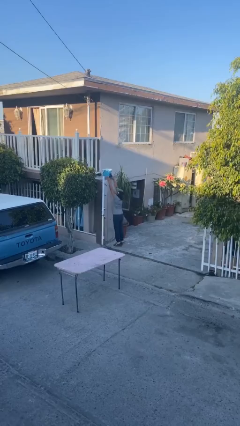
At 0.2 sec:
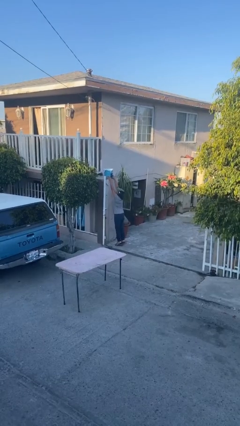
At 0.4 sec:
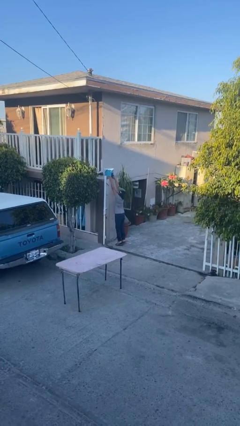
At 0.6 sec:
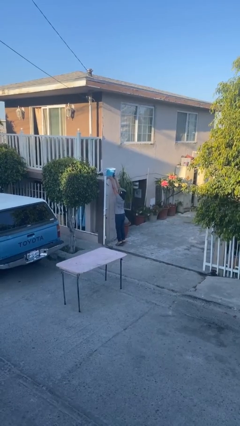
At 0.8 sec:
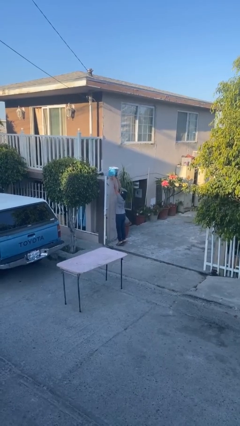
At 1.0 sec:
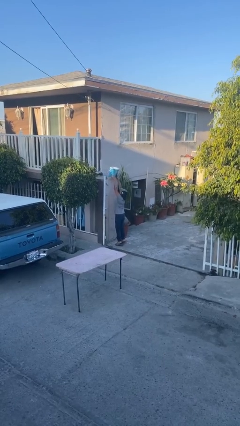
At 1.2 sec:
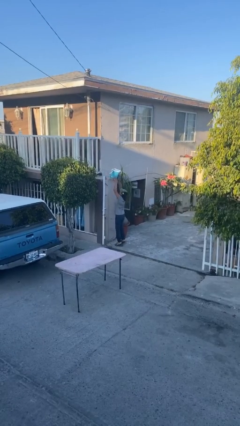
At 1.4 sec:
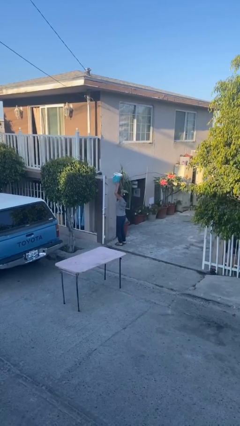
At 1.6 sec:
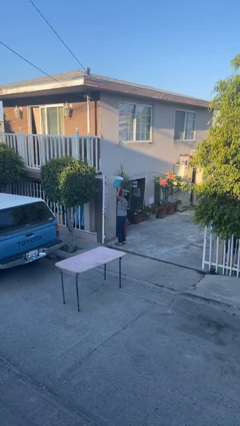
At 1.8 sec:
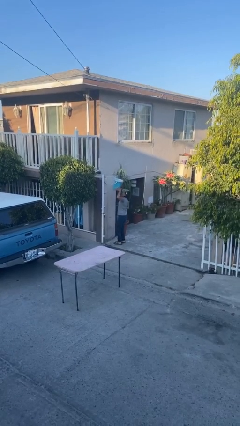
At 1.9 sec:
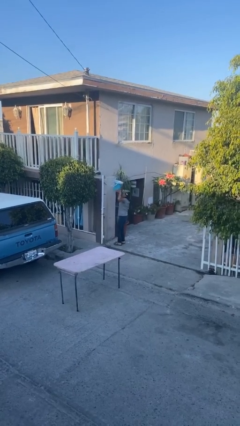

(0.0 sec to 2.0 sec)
person picks up object from shelf

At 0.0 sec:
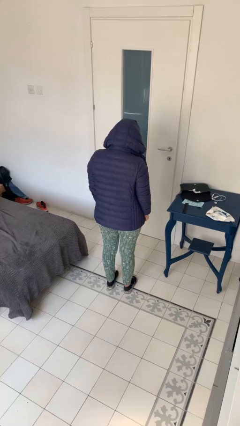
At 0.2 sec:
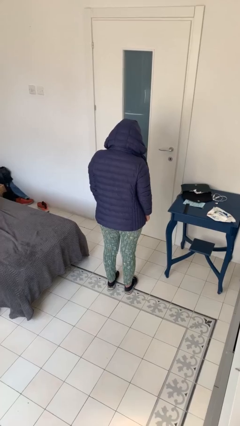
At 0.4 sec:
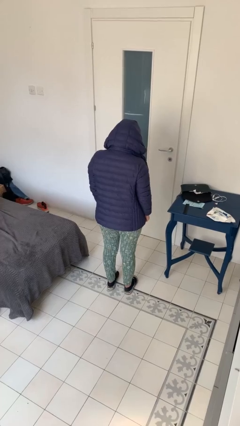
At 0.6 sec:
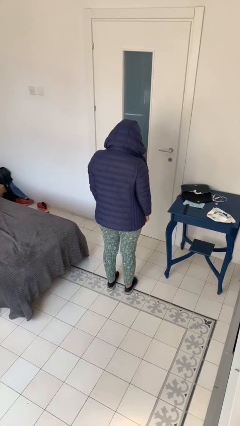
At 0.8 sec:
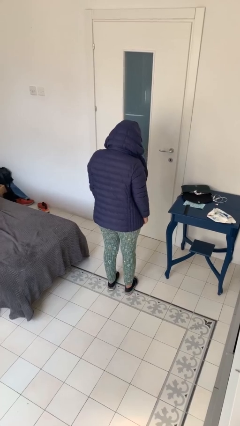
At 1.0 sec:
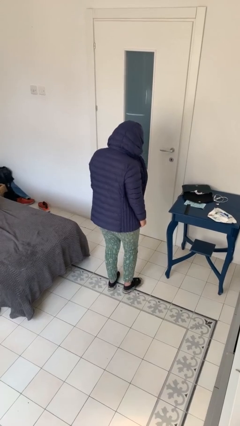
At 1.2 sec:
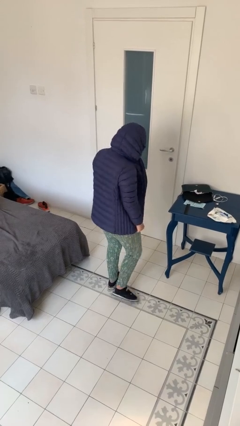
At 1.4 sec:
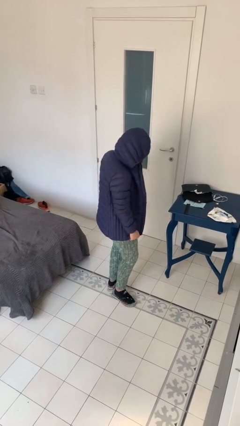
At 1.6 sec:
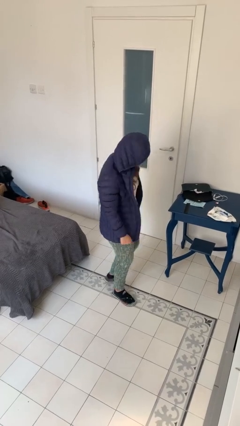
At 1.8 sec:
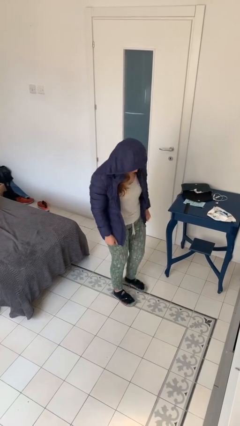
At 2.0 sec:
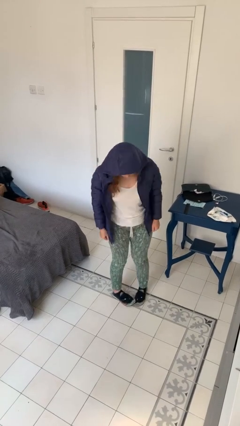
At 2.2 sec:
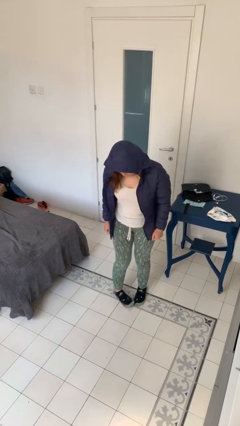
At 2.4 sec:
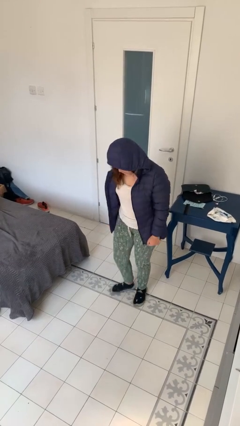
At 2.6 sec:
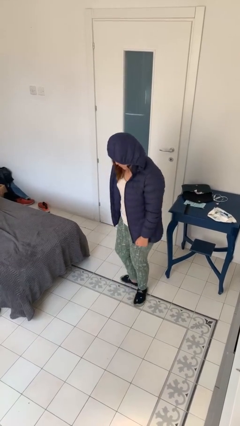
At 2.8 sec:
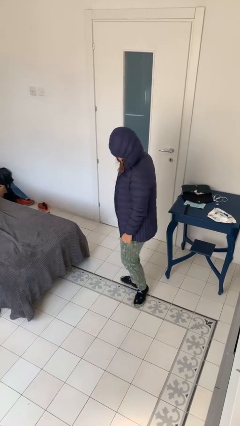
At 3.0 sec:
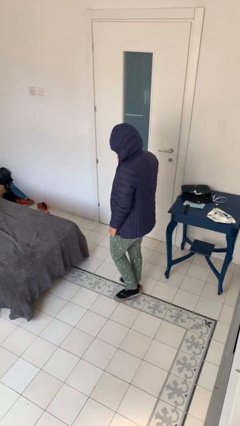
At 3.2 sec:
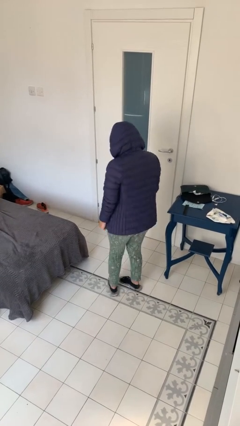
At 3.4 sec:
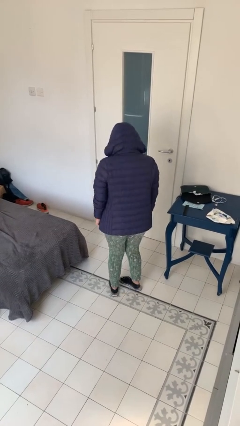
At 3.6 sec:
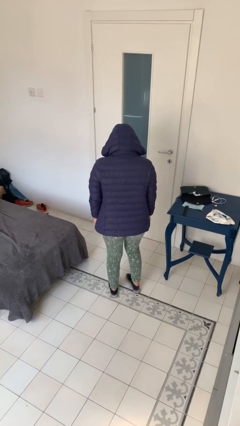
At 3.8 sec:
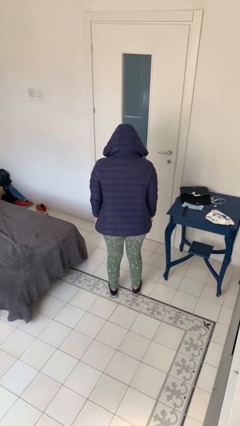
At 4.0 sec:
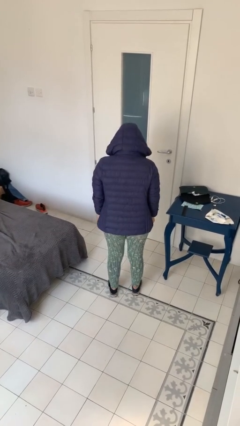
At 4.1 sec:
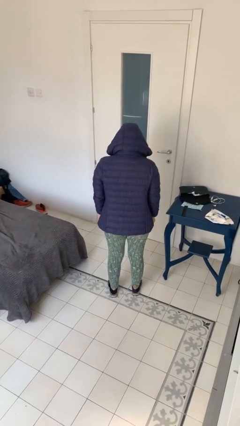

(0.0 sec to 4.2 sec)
person twirls

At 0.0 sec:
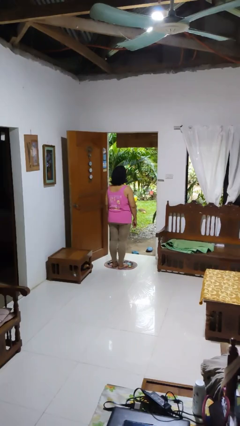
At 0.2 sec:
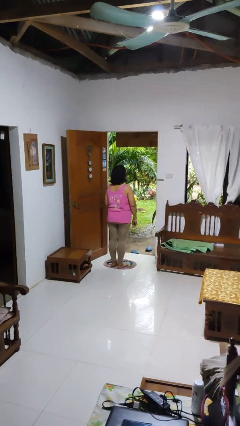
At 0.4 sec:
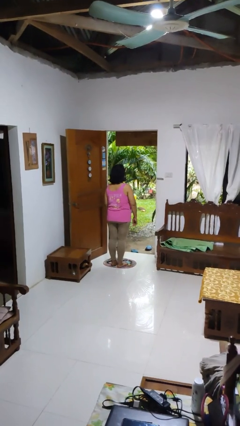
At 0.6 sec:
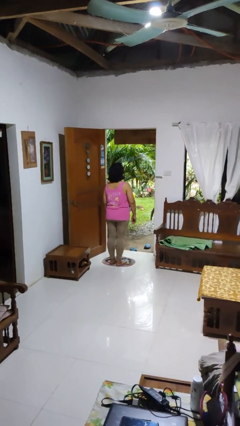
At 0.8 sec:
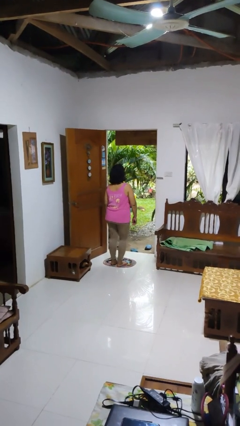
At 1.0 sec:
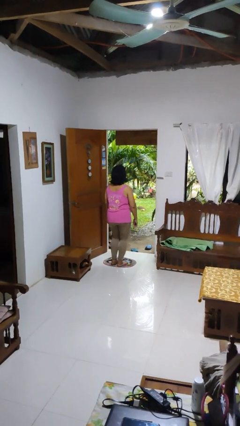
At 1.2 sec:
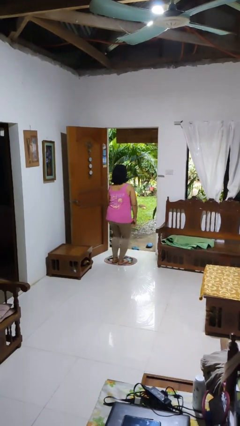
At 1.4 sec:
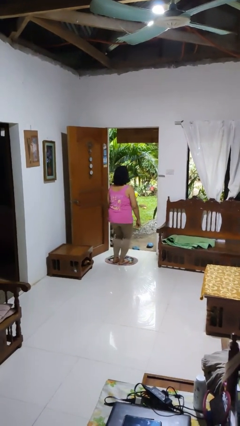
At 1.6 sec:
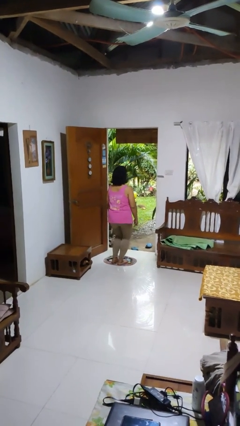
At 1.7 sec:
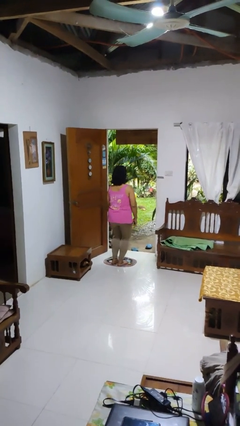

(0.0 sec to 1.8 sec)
person wiggles hips

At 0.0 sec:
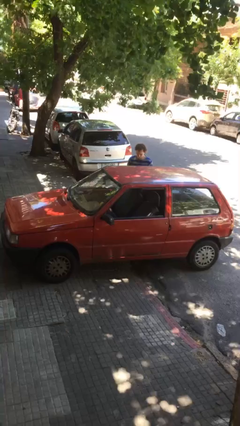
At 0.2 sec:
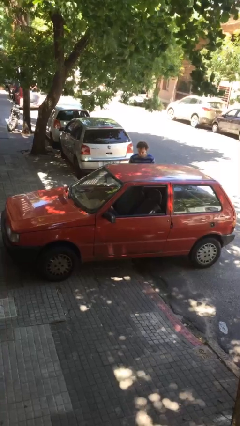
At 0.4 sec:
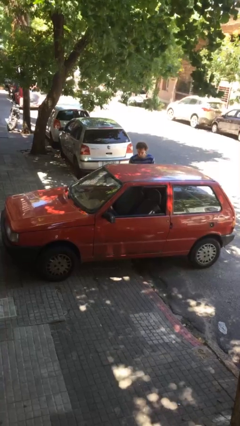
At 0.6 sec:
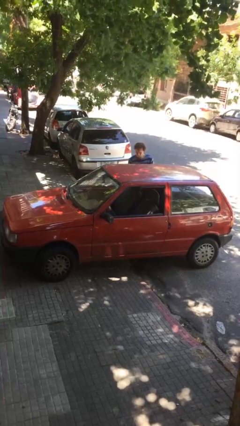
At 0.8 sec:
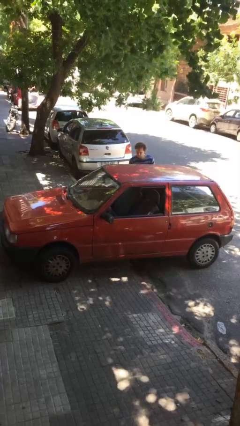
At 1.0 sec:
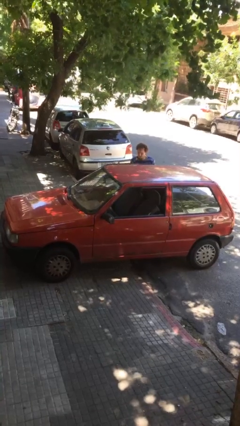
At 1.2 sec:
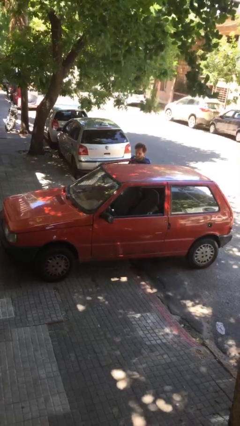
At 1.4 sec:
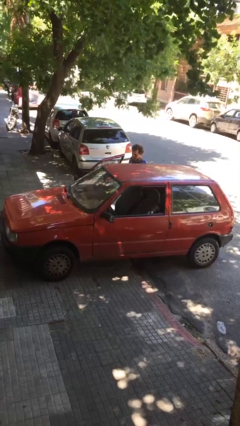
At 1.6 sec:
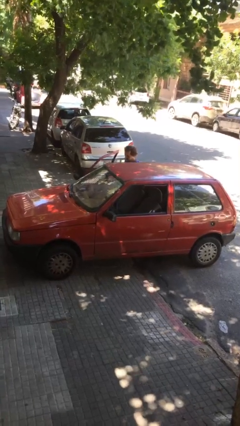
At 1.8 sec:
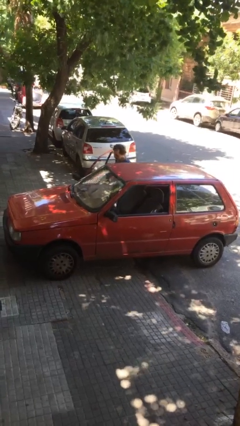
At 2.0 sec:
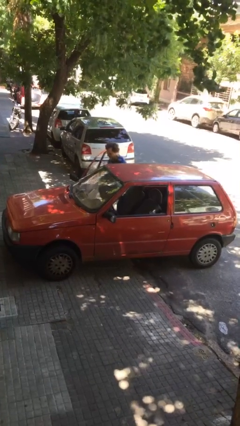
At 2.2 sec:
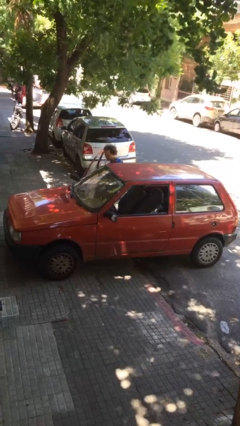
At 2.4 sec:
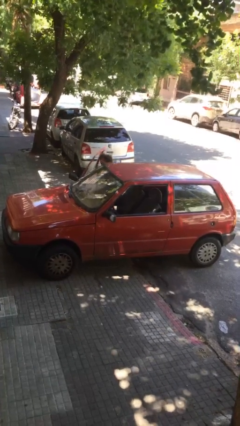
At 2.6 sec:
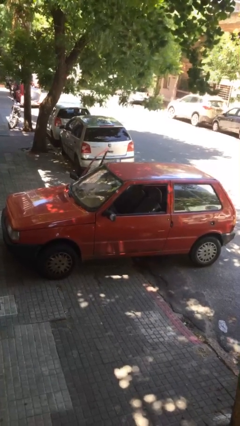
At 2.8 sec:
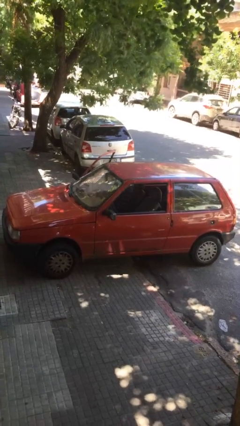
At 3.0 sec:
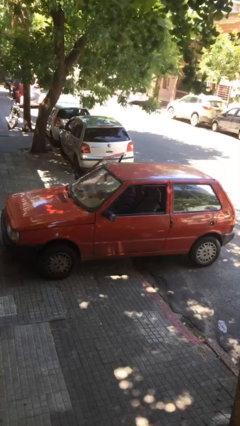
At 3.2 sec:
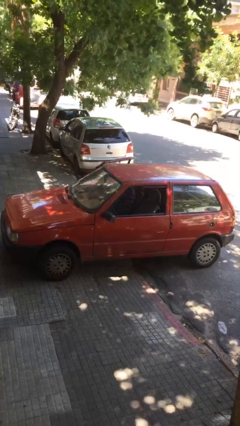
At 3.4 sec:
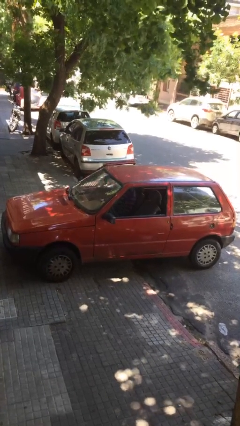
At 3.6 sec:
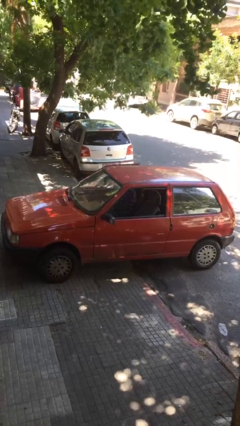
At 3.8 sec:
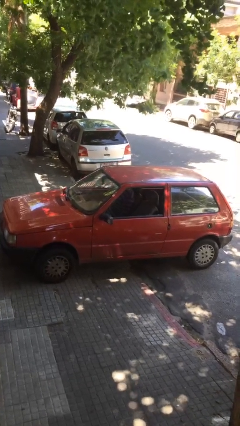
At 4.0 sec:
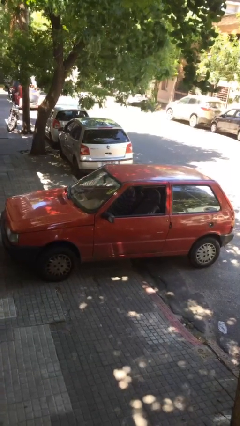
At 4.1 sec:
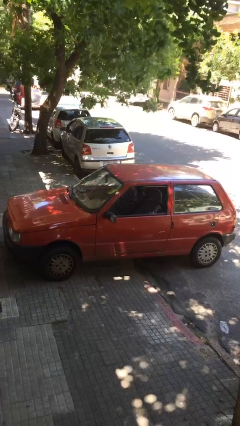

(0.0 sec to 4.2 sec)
car picks up person

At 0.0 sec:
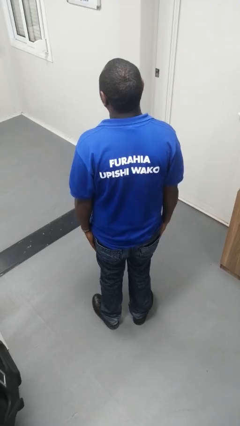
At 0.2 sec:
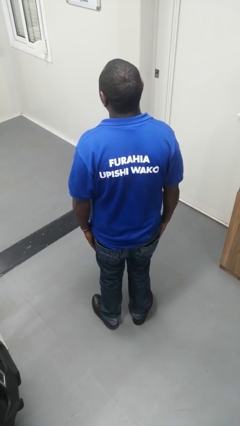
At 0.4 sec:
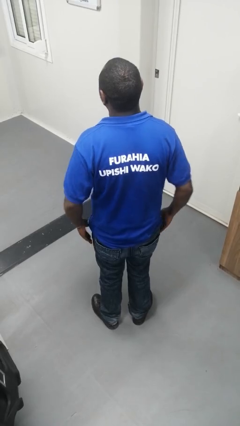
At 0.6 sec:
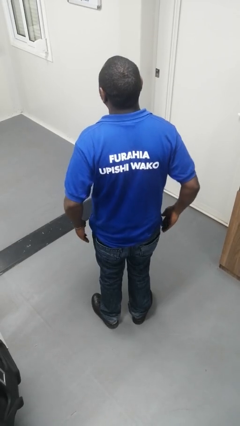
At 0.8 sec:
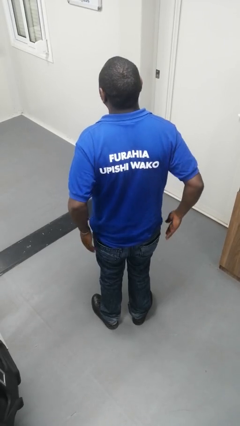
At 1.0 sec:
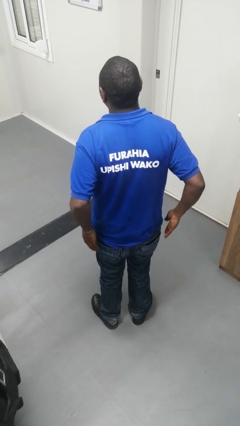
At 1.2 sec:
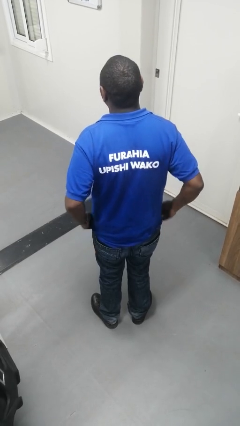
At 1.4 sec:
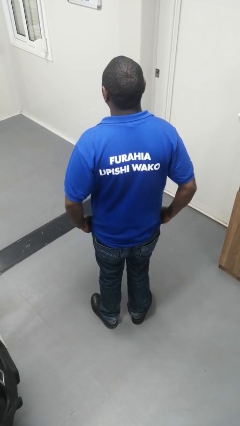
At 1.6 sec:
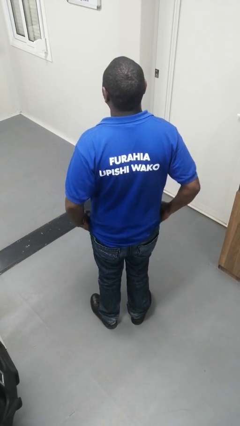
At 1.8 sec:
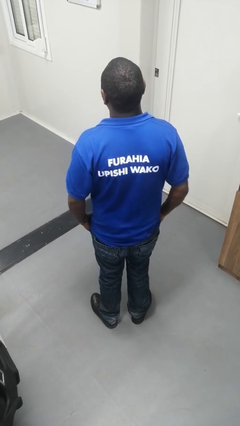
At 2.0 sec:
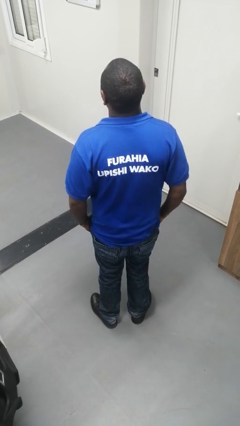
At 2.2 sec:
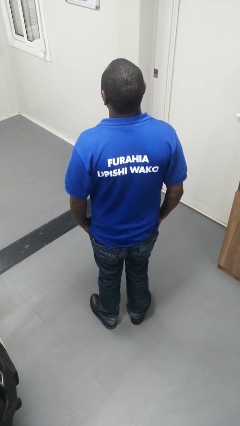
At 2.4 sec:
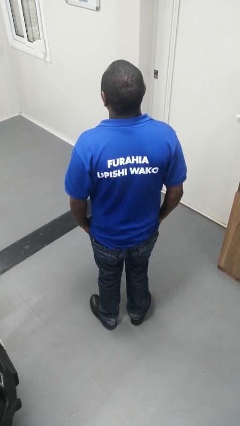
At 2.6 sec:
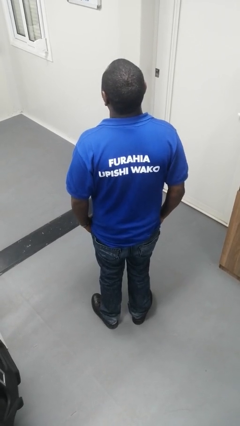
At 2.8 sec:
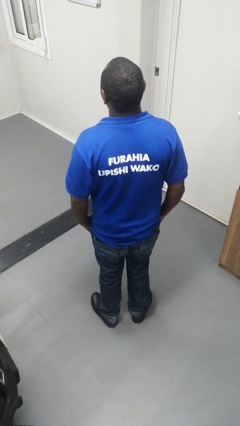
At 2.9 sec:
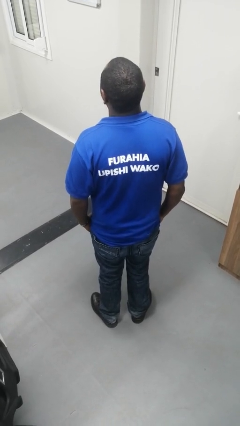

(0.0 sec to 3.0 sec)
person puts hands in back pockets

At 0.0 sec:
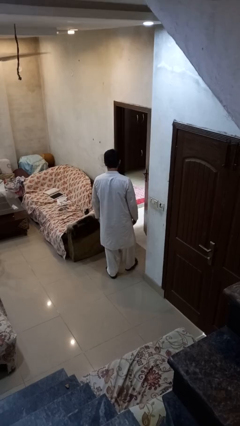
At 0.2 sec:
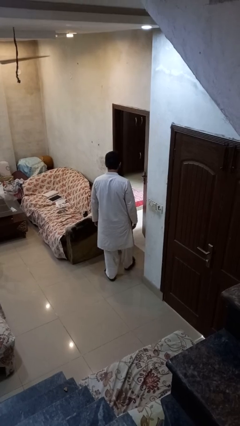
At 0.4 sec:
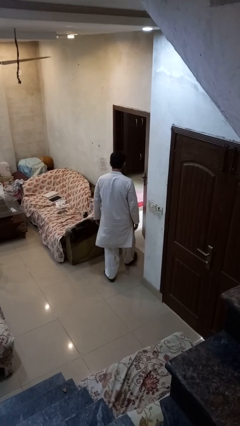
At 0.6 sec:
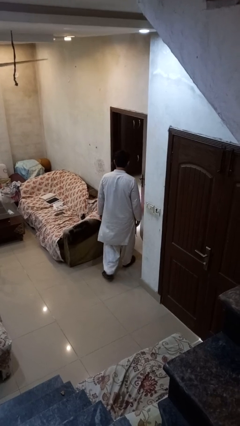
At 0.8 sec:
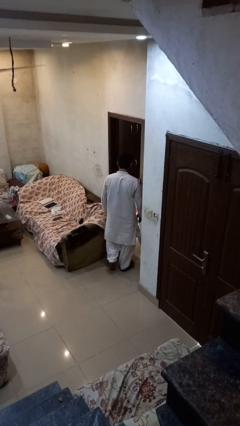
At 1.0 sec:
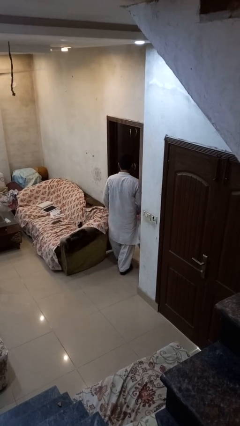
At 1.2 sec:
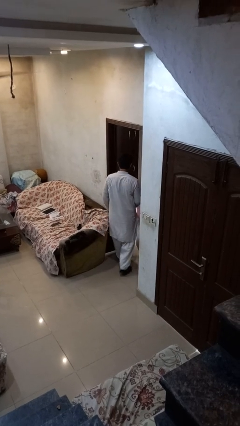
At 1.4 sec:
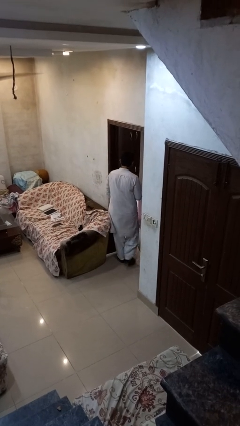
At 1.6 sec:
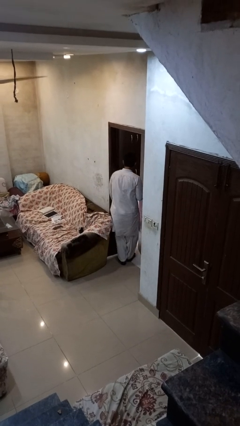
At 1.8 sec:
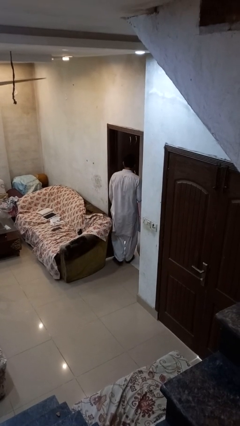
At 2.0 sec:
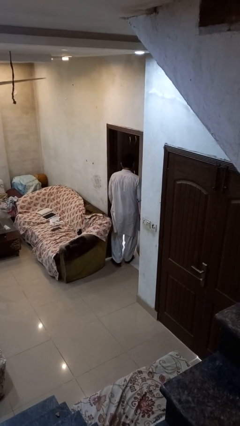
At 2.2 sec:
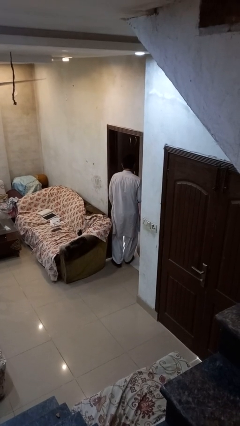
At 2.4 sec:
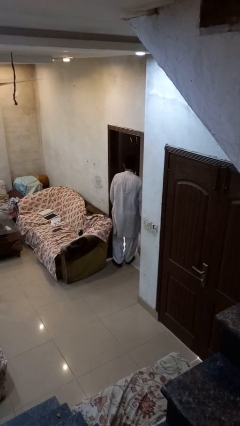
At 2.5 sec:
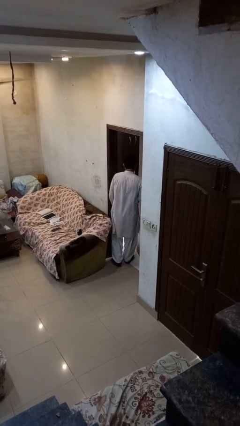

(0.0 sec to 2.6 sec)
person bumps into wall
